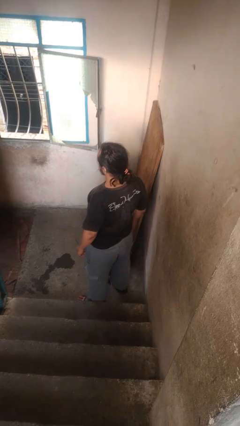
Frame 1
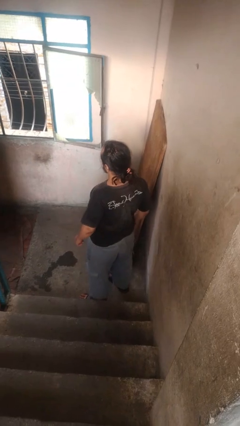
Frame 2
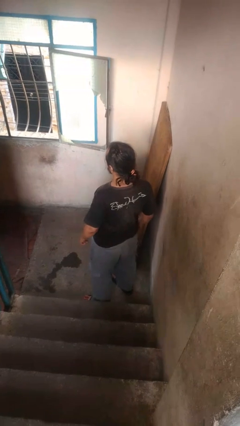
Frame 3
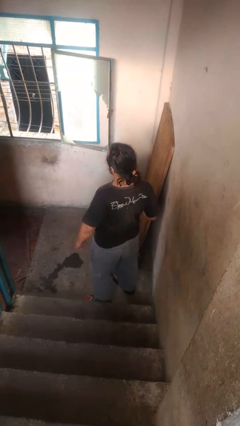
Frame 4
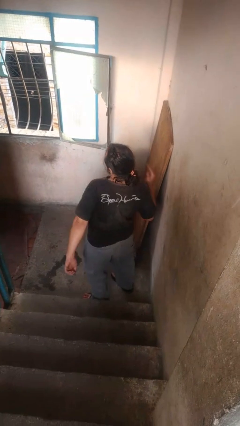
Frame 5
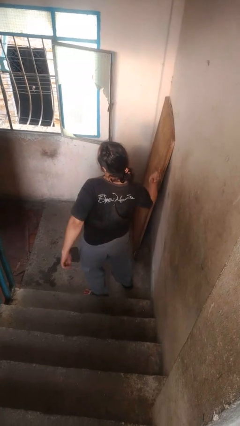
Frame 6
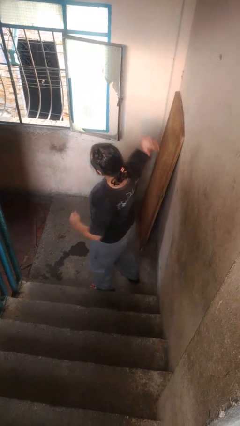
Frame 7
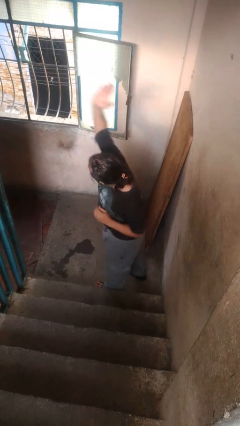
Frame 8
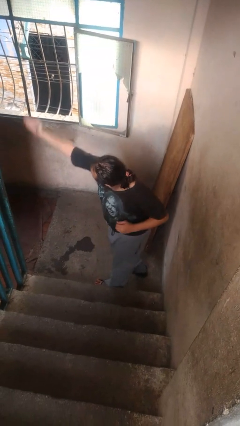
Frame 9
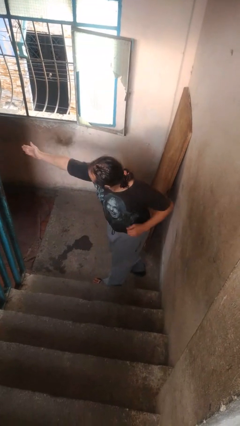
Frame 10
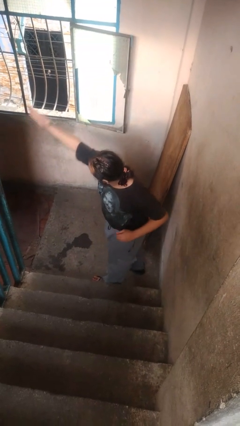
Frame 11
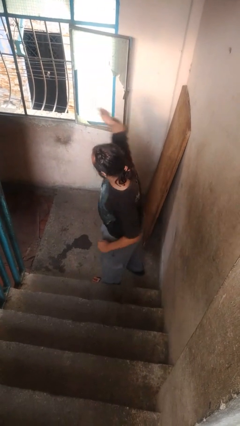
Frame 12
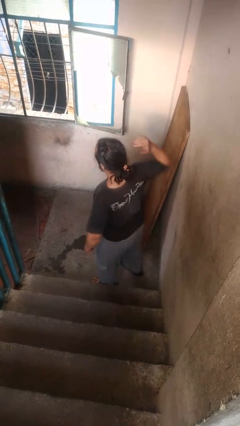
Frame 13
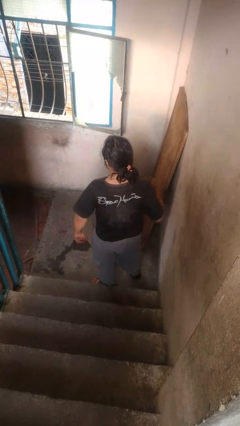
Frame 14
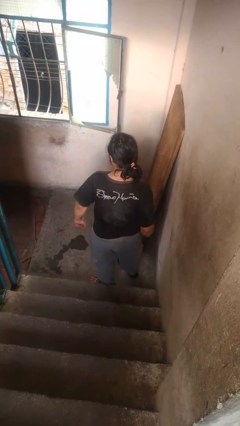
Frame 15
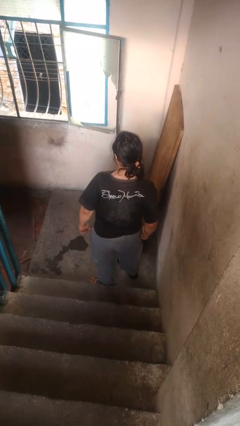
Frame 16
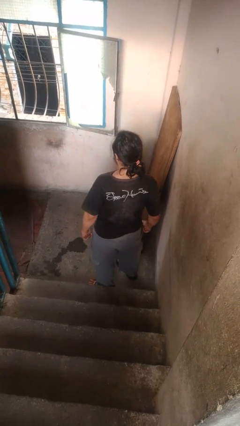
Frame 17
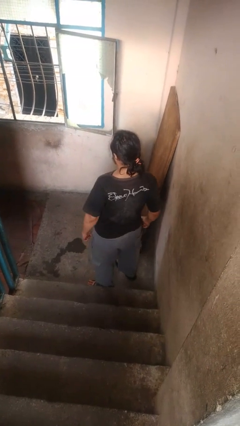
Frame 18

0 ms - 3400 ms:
person karate chop

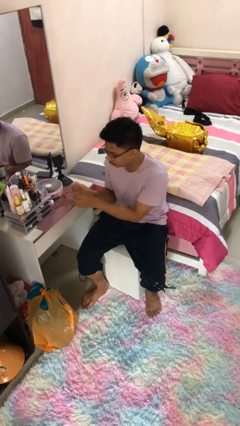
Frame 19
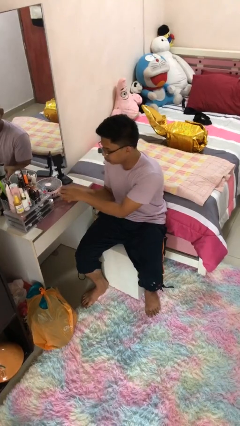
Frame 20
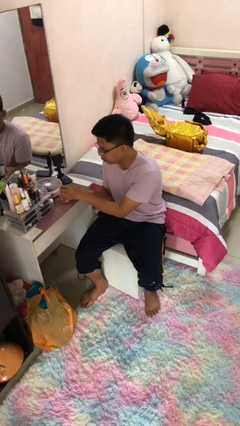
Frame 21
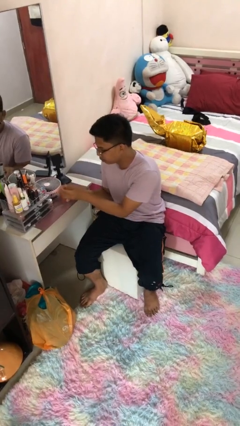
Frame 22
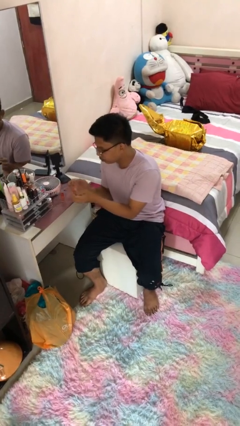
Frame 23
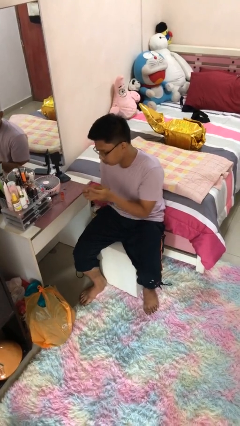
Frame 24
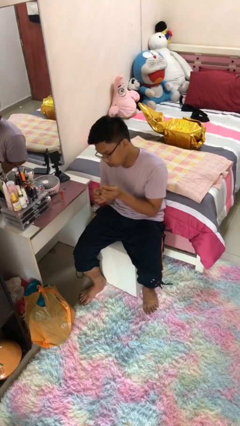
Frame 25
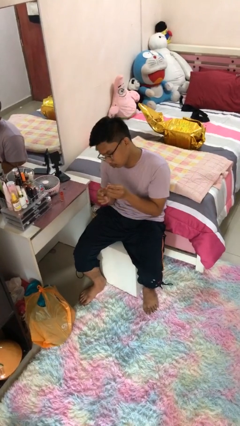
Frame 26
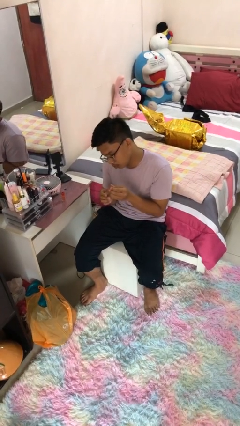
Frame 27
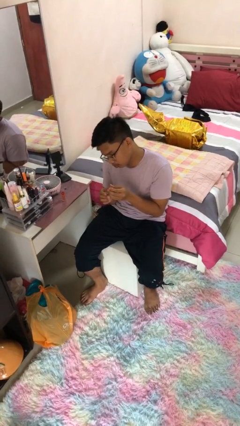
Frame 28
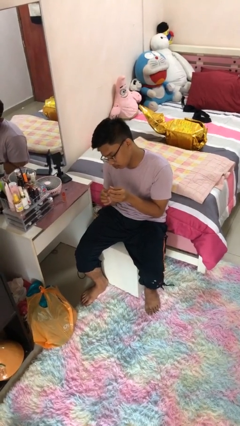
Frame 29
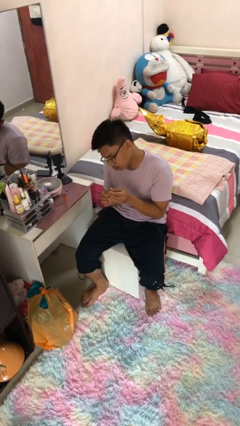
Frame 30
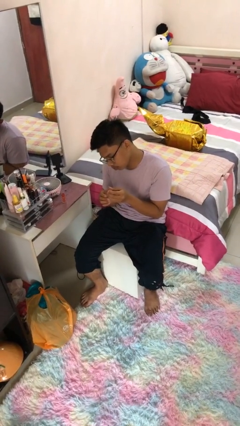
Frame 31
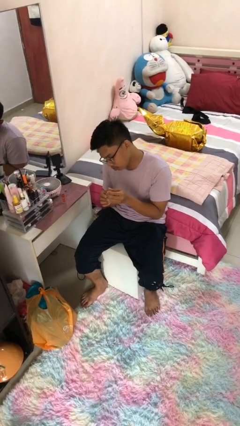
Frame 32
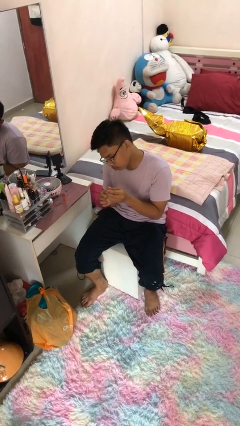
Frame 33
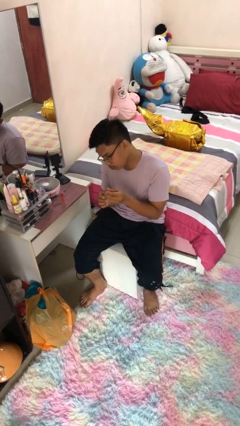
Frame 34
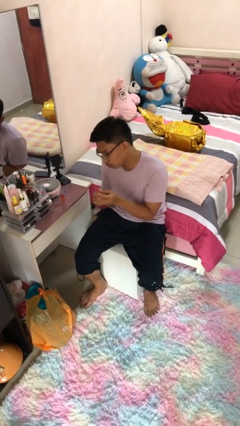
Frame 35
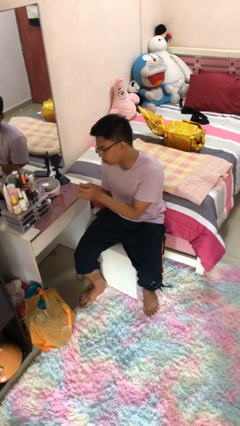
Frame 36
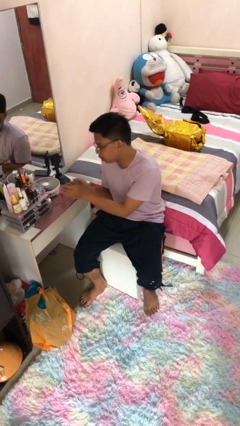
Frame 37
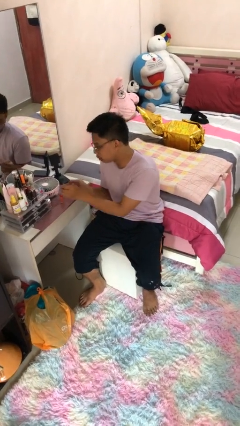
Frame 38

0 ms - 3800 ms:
person paints fingernails

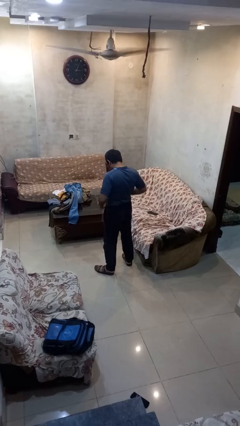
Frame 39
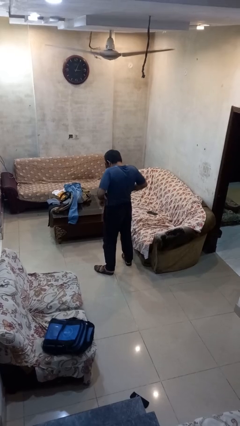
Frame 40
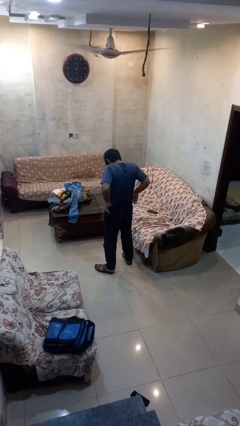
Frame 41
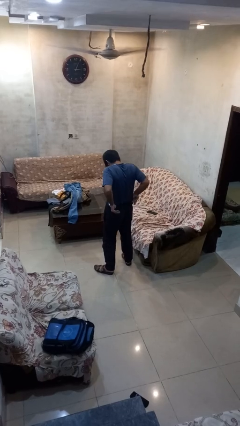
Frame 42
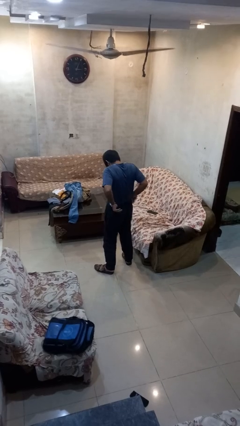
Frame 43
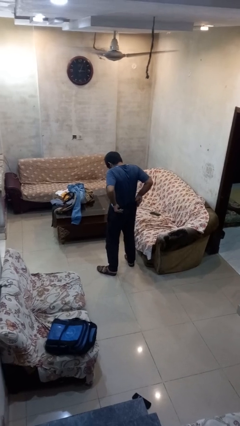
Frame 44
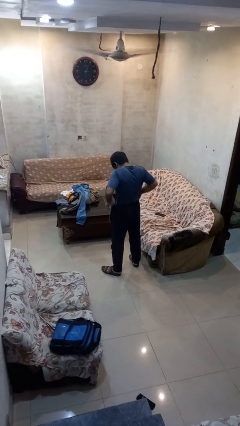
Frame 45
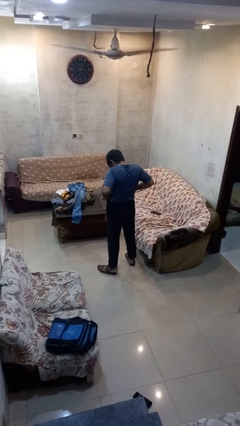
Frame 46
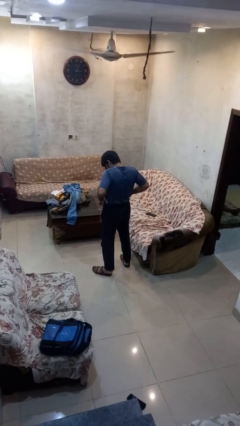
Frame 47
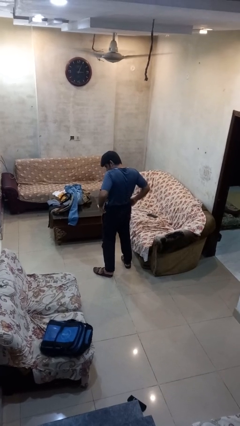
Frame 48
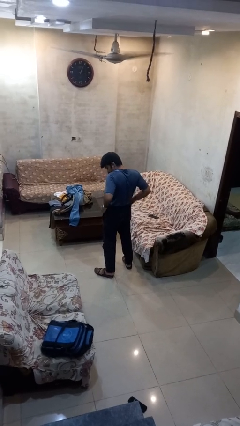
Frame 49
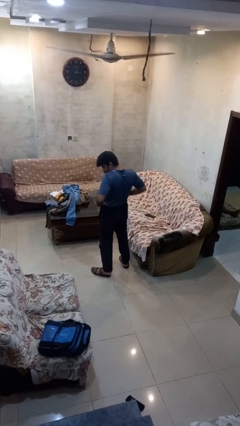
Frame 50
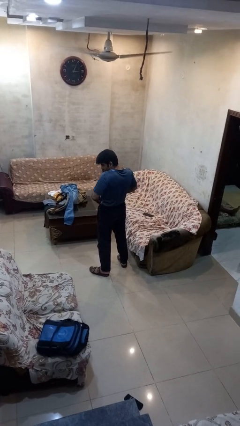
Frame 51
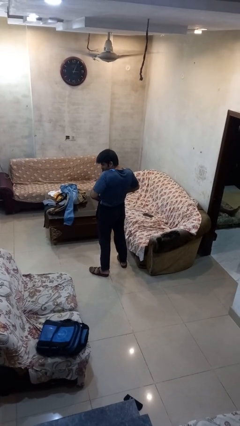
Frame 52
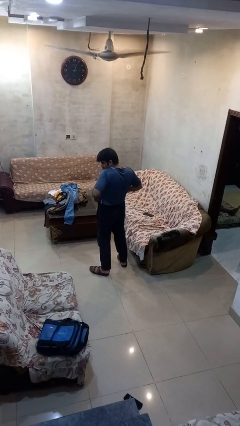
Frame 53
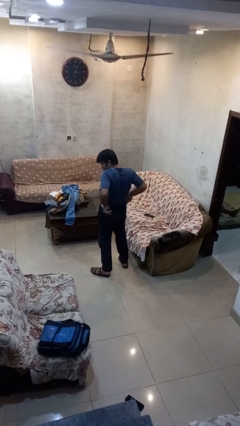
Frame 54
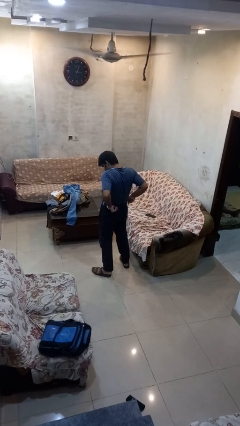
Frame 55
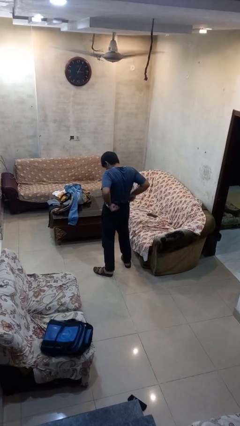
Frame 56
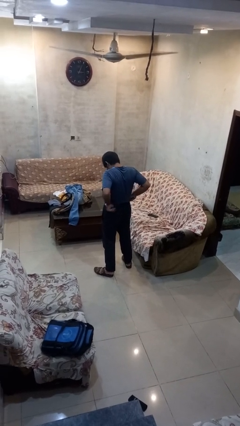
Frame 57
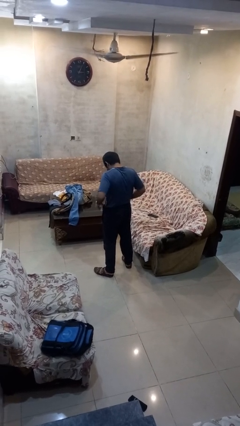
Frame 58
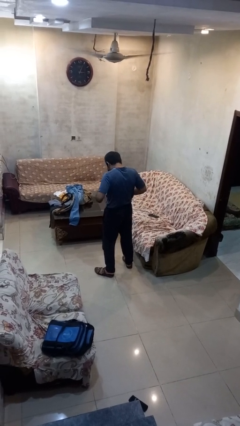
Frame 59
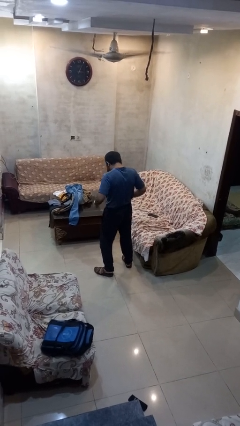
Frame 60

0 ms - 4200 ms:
person hikes up pants

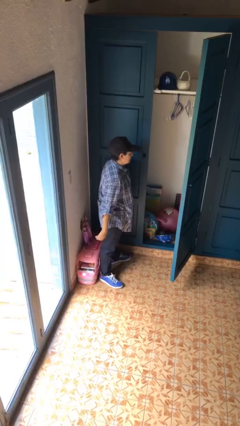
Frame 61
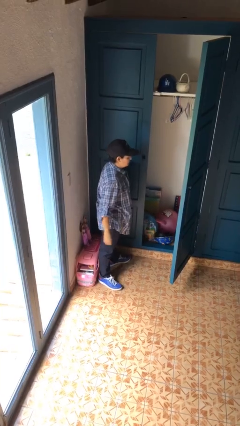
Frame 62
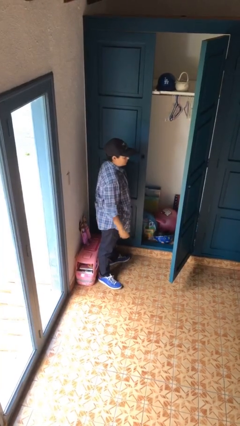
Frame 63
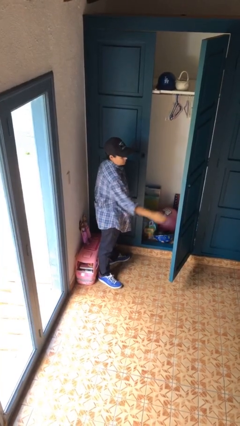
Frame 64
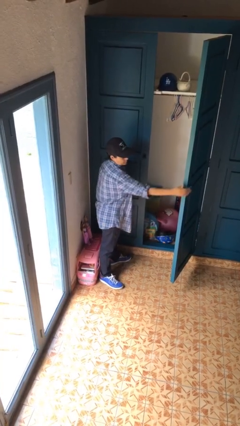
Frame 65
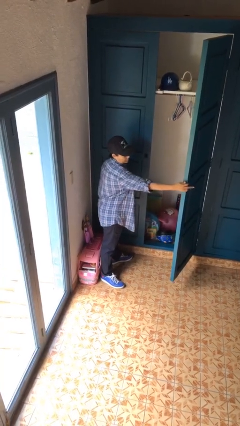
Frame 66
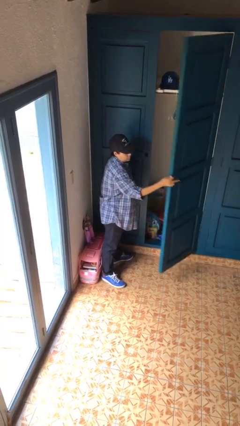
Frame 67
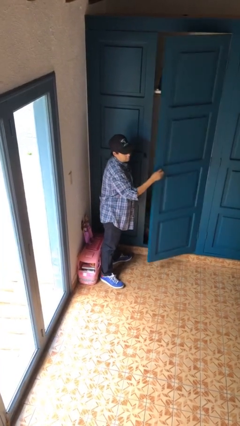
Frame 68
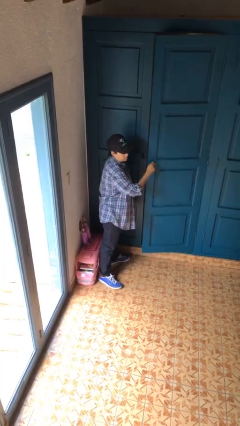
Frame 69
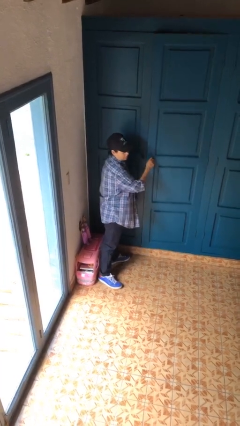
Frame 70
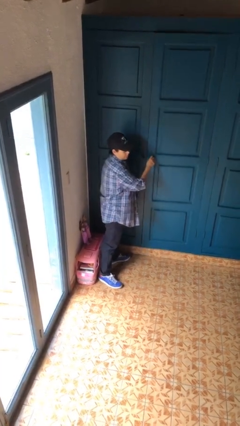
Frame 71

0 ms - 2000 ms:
person closes closet door

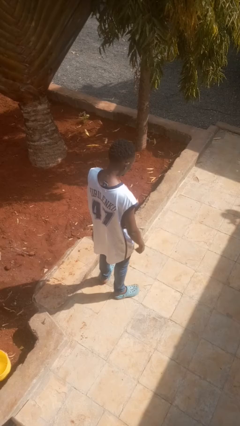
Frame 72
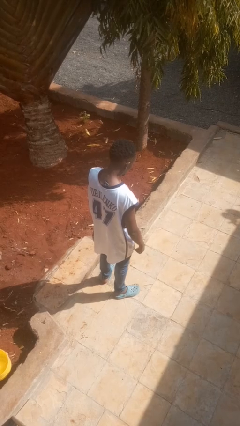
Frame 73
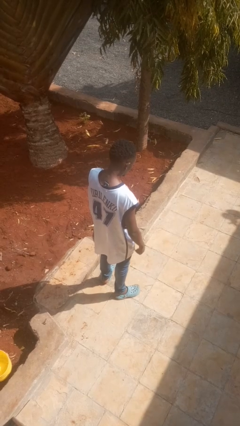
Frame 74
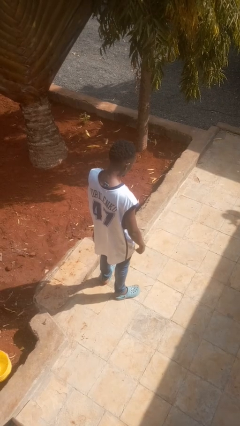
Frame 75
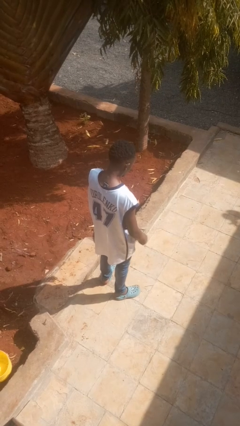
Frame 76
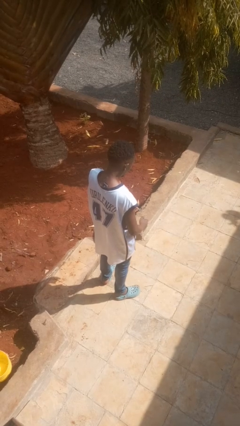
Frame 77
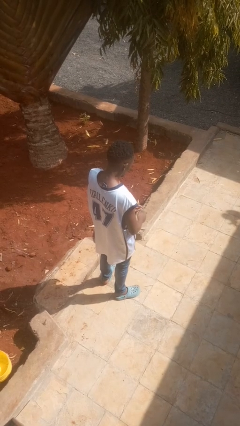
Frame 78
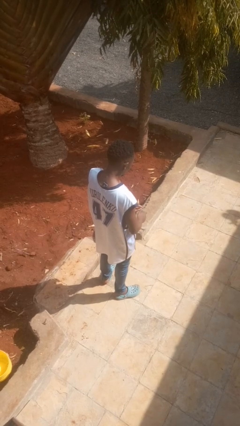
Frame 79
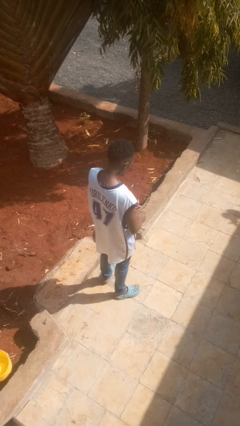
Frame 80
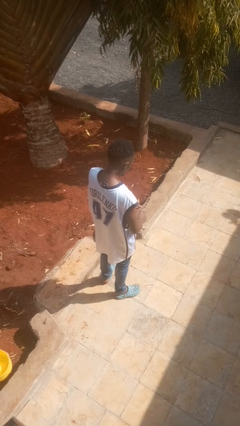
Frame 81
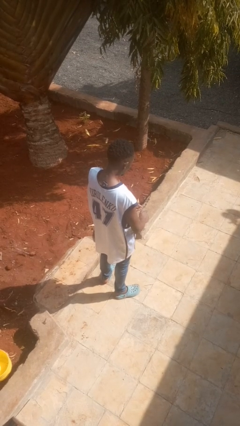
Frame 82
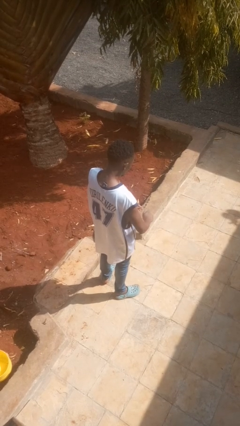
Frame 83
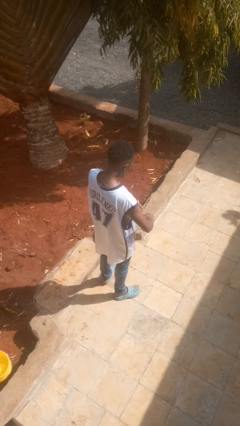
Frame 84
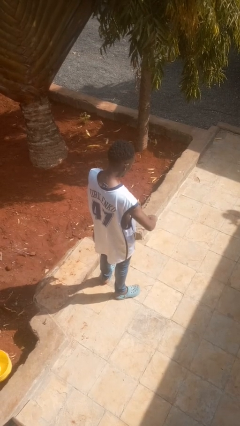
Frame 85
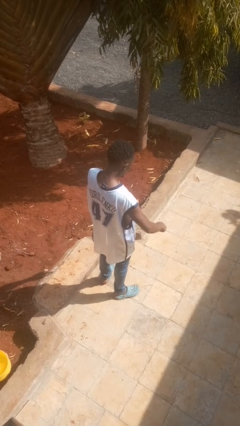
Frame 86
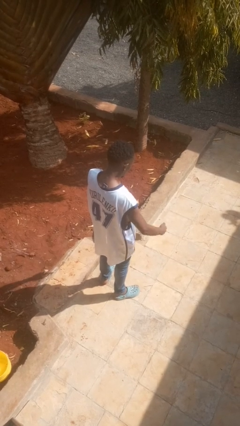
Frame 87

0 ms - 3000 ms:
person clips fingernails

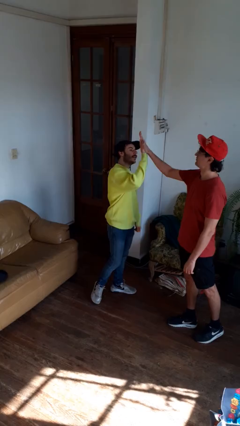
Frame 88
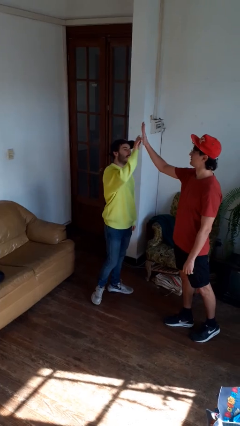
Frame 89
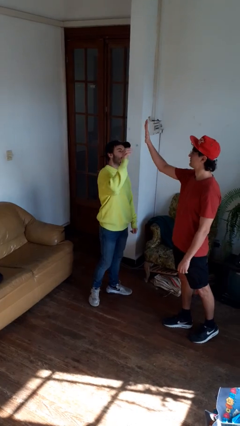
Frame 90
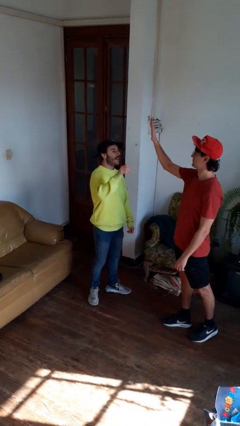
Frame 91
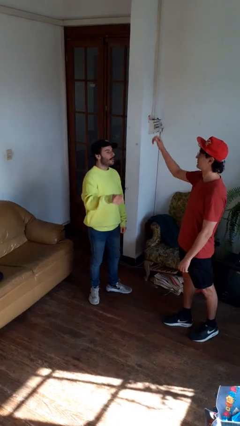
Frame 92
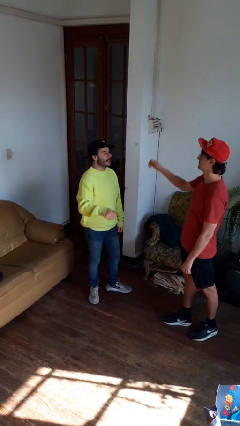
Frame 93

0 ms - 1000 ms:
person highfives hand
